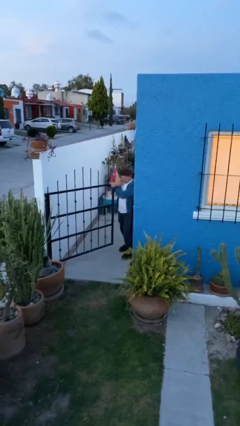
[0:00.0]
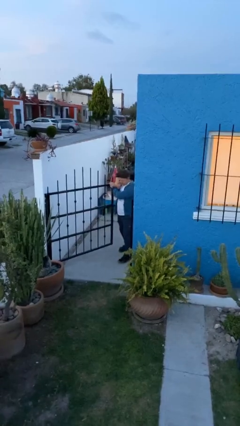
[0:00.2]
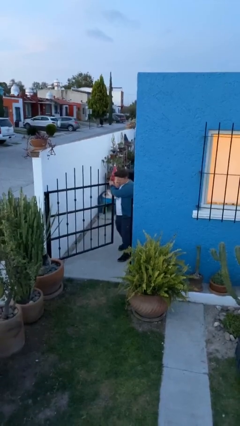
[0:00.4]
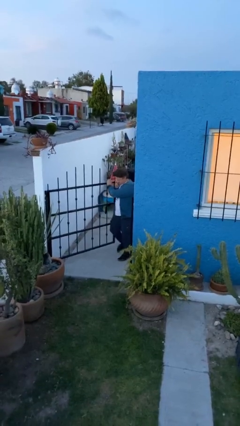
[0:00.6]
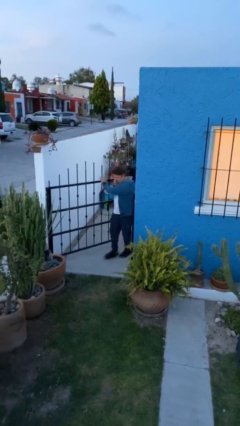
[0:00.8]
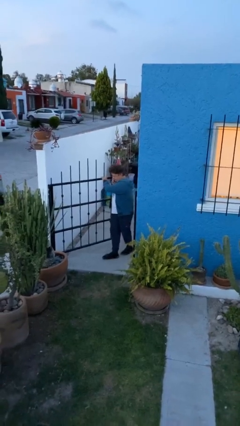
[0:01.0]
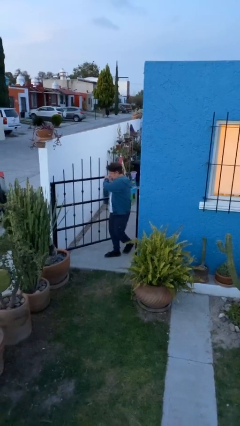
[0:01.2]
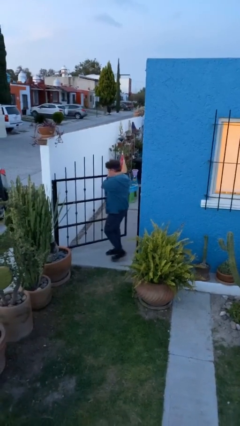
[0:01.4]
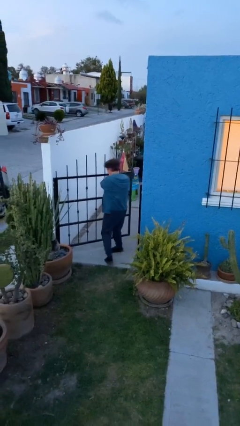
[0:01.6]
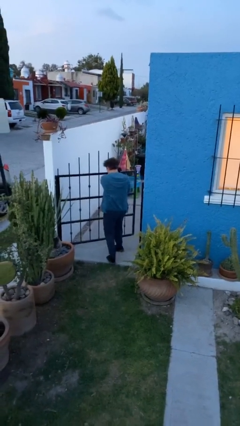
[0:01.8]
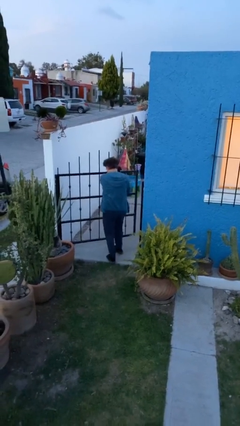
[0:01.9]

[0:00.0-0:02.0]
person enters scene through structure

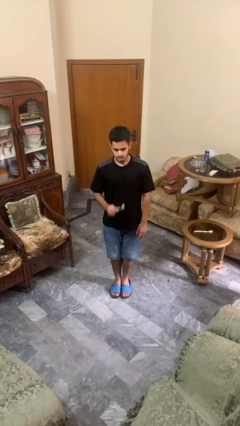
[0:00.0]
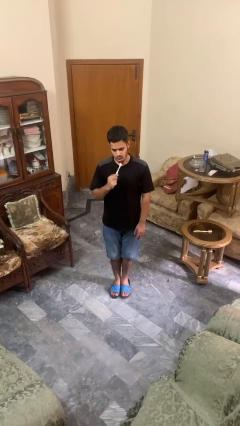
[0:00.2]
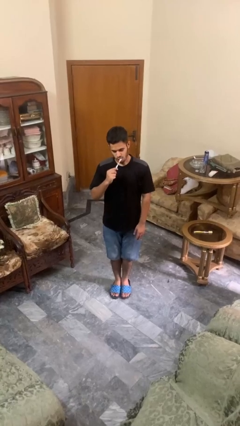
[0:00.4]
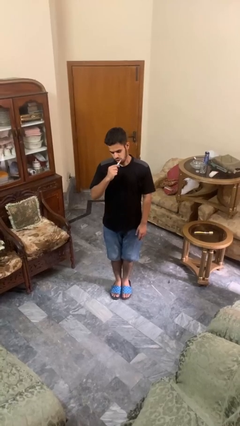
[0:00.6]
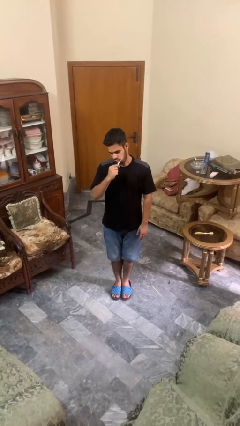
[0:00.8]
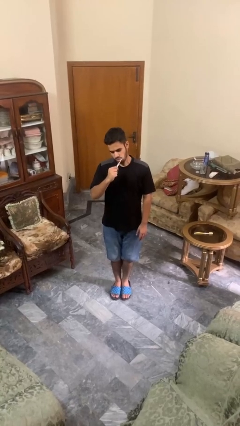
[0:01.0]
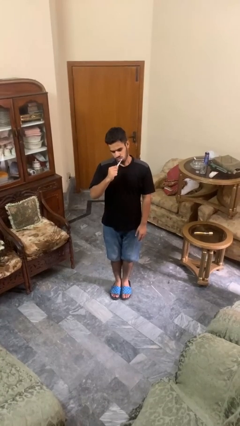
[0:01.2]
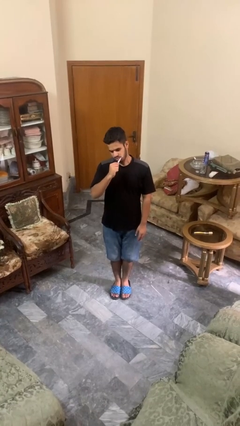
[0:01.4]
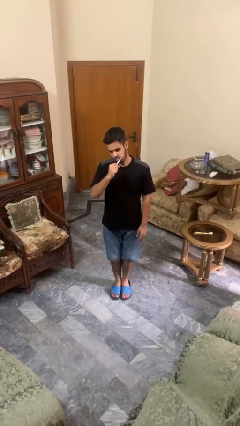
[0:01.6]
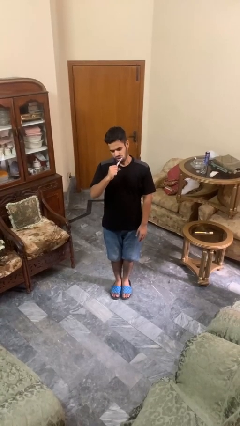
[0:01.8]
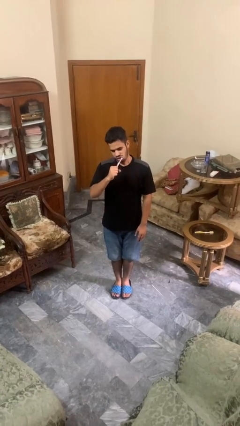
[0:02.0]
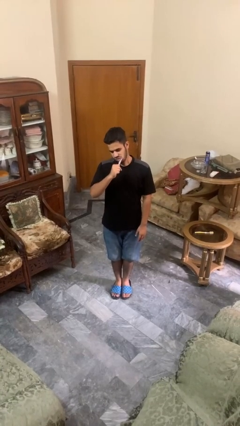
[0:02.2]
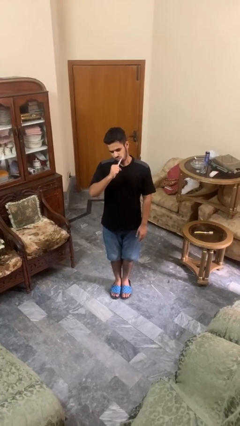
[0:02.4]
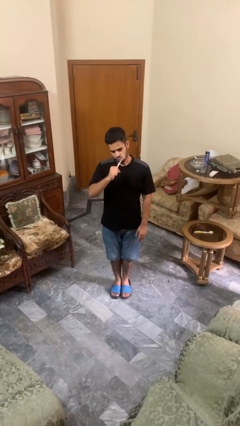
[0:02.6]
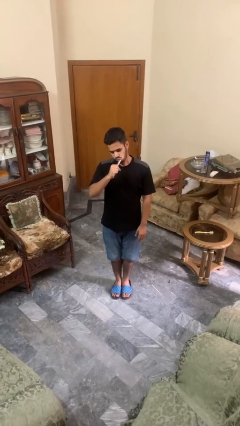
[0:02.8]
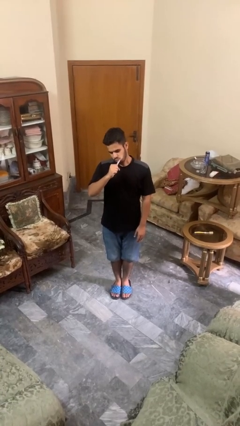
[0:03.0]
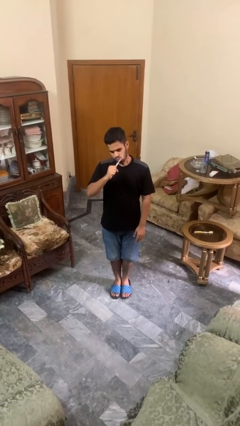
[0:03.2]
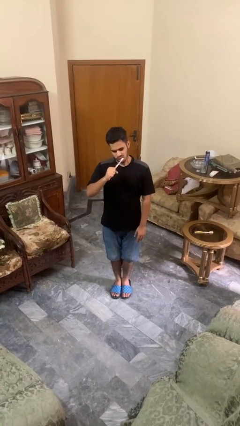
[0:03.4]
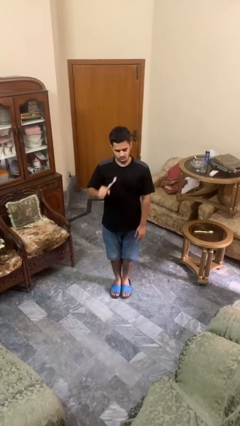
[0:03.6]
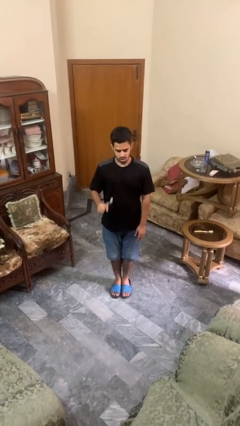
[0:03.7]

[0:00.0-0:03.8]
person brushes teeth

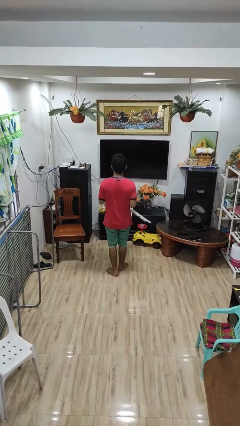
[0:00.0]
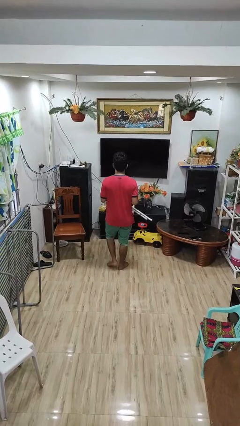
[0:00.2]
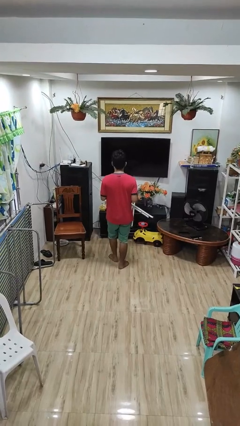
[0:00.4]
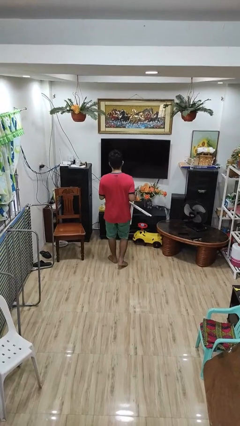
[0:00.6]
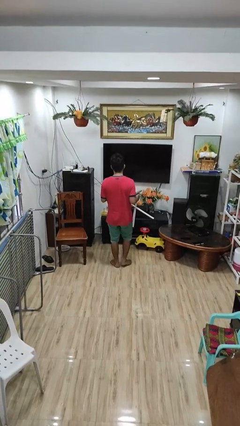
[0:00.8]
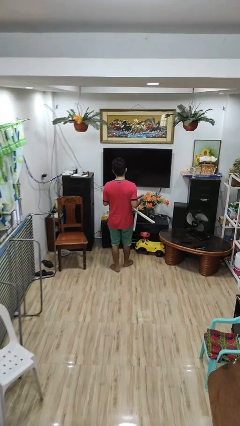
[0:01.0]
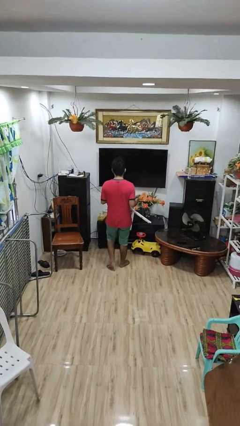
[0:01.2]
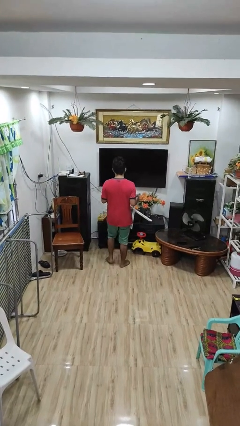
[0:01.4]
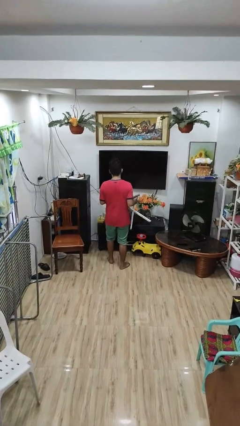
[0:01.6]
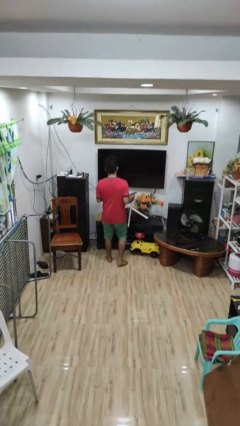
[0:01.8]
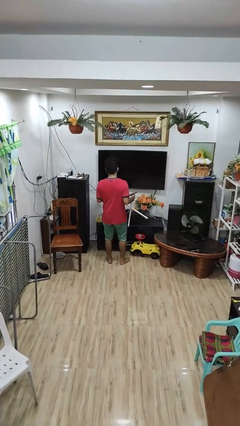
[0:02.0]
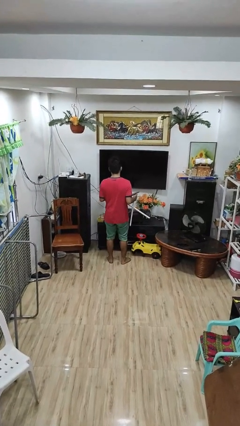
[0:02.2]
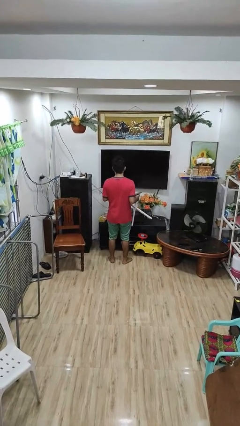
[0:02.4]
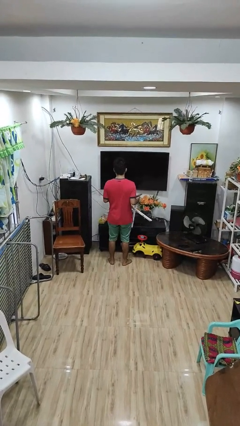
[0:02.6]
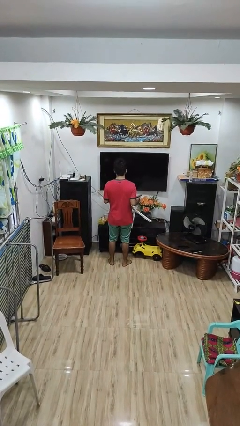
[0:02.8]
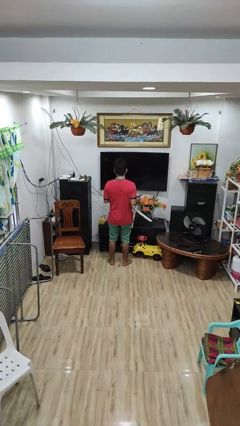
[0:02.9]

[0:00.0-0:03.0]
person carries furniture

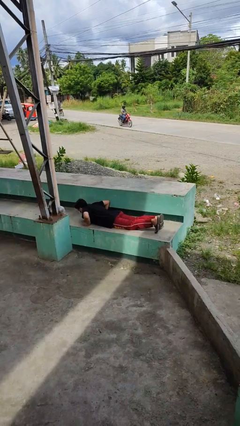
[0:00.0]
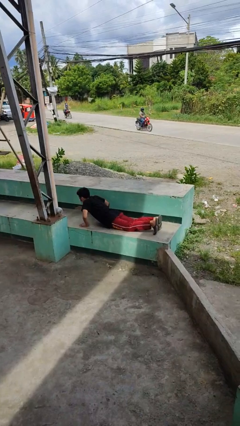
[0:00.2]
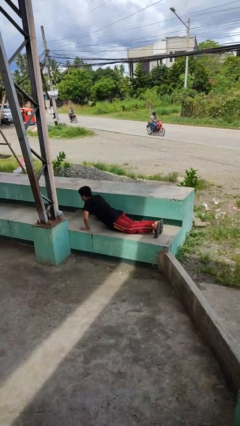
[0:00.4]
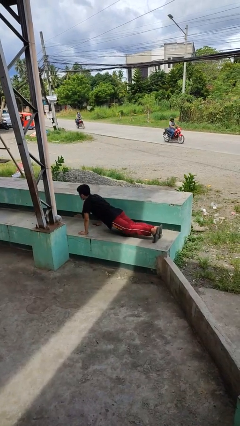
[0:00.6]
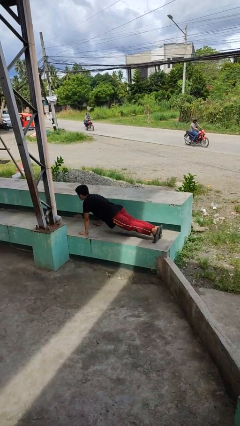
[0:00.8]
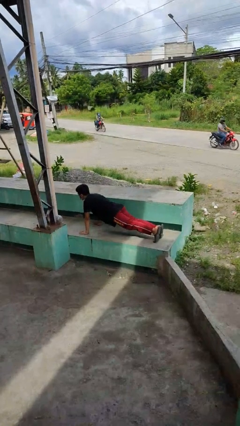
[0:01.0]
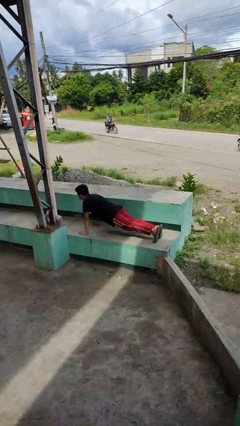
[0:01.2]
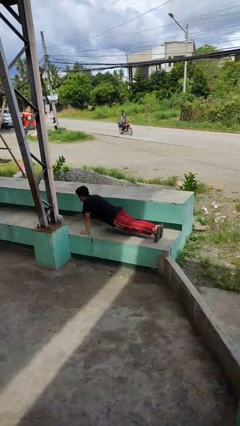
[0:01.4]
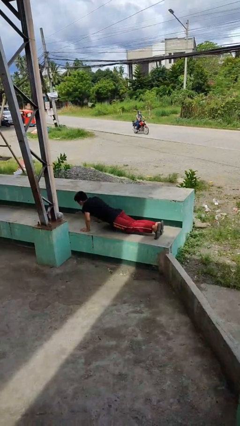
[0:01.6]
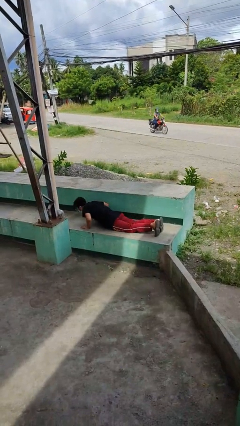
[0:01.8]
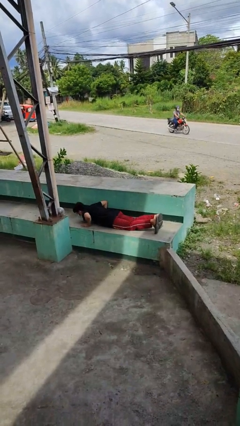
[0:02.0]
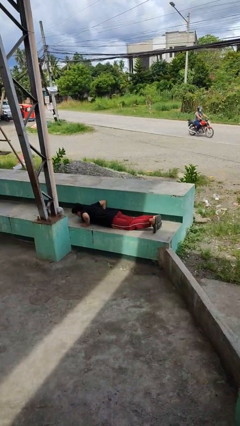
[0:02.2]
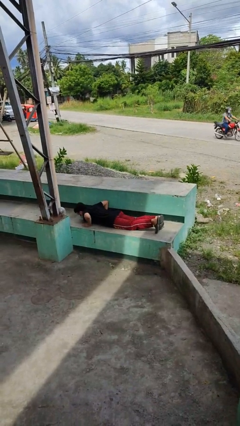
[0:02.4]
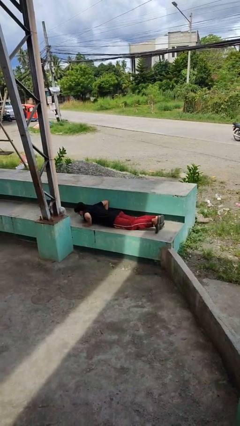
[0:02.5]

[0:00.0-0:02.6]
person exercises with pushup

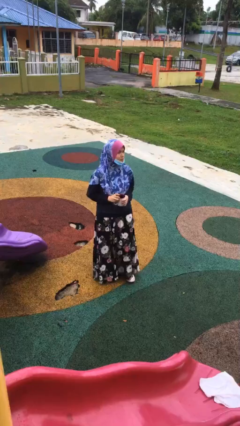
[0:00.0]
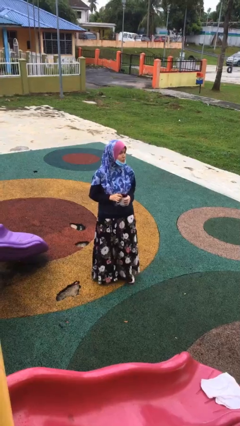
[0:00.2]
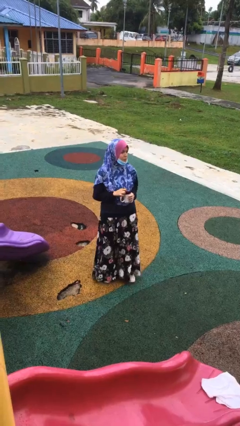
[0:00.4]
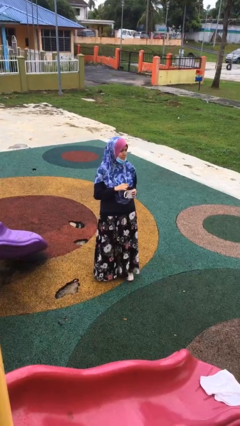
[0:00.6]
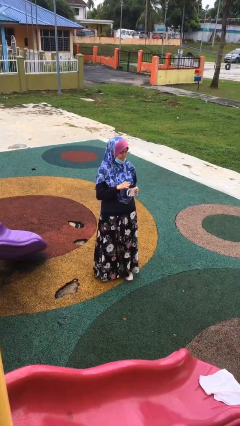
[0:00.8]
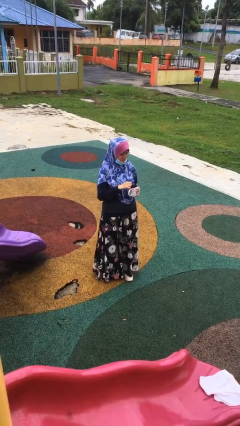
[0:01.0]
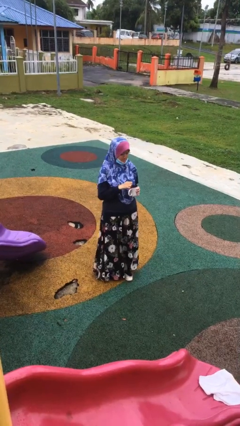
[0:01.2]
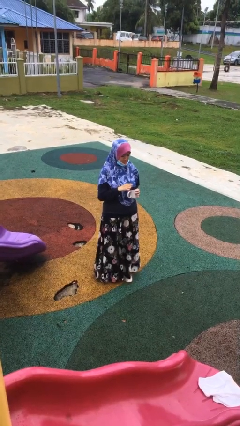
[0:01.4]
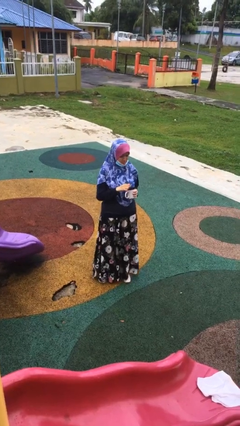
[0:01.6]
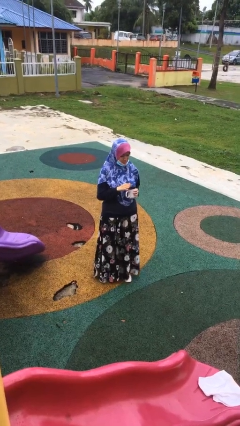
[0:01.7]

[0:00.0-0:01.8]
person stirs mug

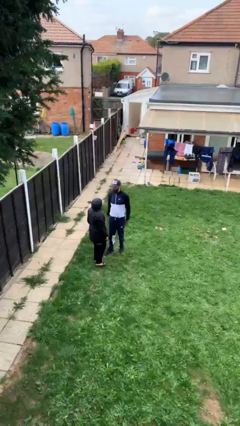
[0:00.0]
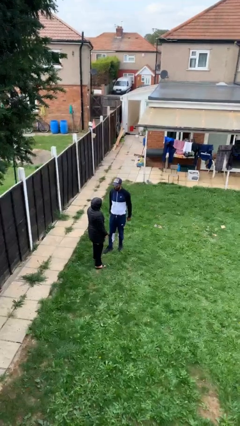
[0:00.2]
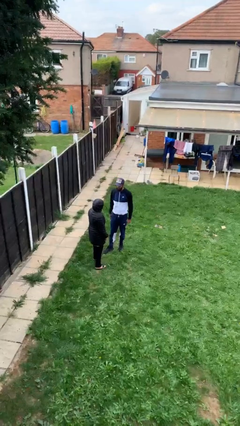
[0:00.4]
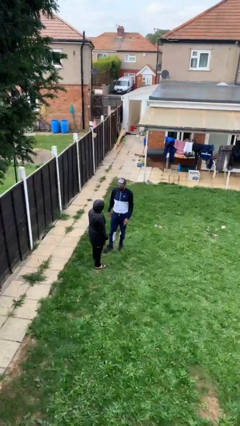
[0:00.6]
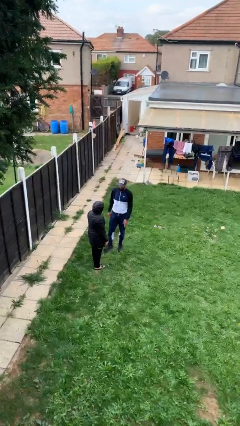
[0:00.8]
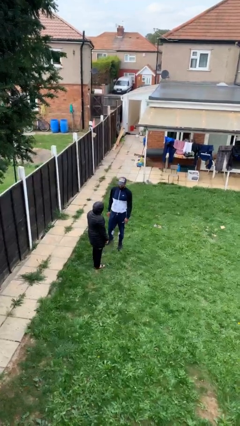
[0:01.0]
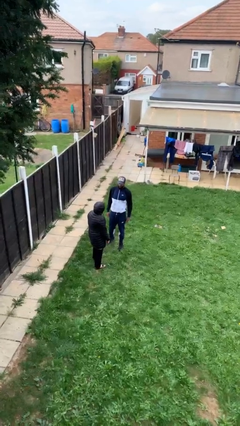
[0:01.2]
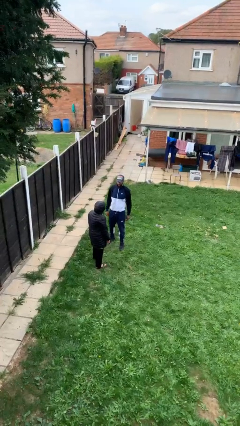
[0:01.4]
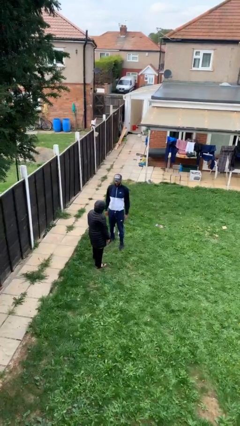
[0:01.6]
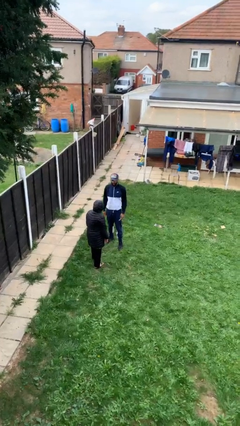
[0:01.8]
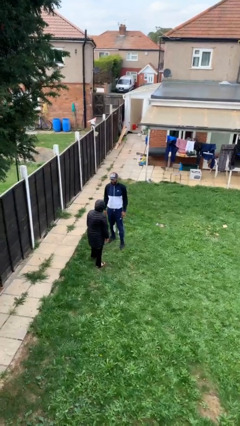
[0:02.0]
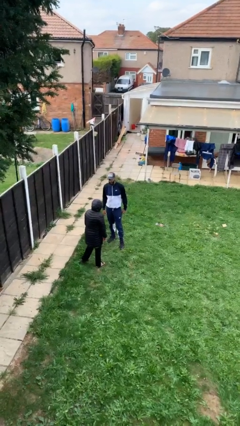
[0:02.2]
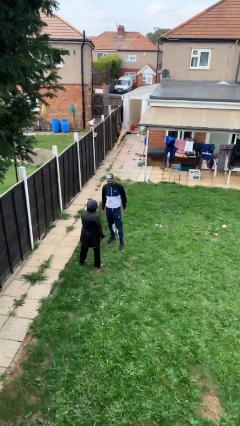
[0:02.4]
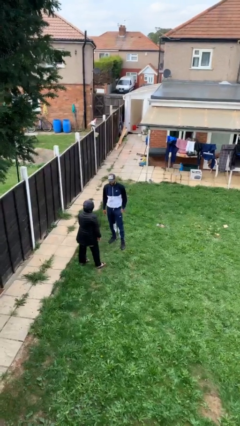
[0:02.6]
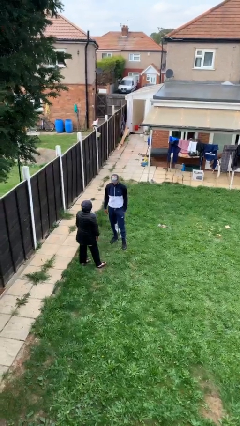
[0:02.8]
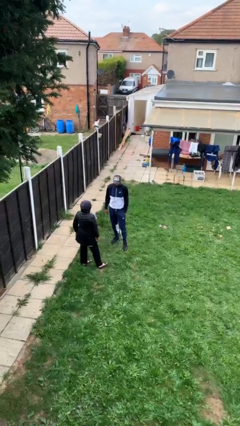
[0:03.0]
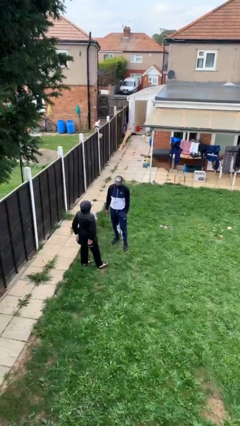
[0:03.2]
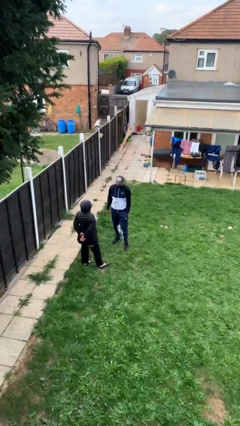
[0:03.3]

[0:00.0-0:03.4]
person talks to person

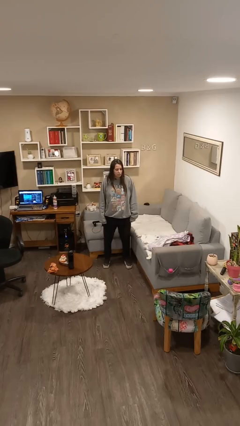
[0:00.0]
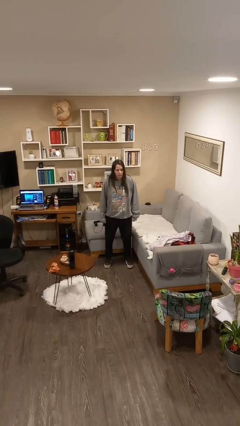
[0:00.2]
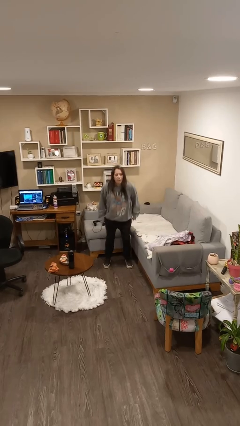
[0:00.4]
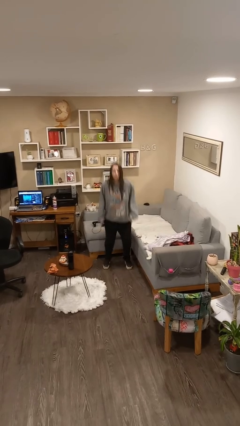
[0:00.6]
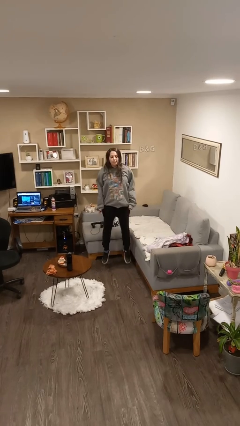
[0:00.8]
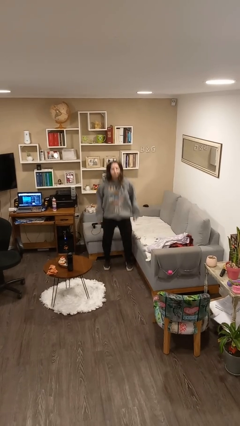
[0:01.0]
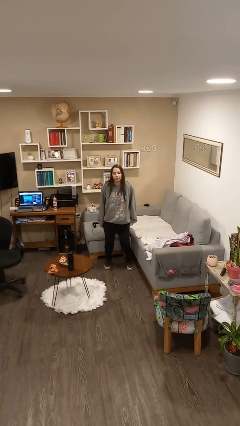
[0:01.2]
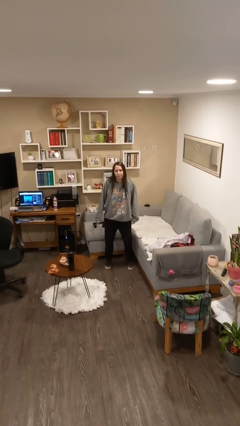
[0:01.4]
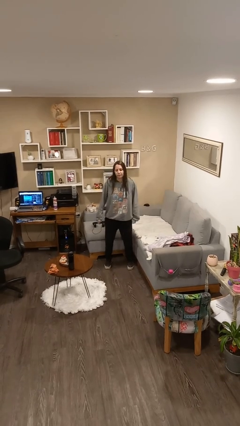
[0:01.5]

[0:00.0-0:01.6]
person jumps
